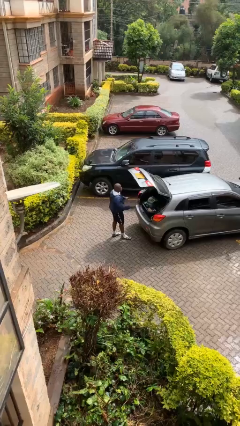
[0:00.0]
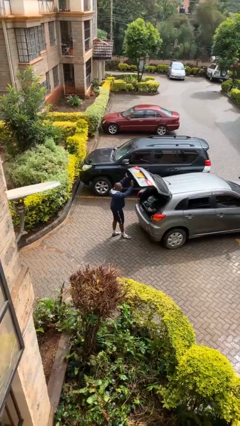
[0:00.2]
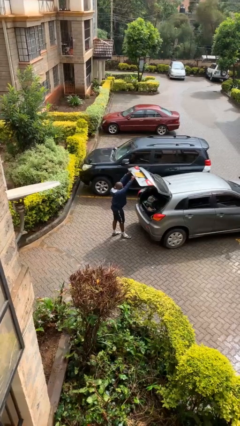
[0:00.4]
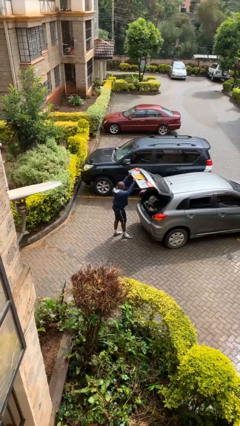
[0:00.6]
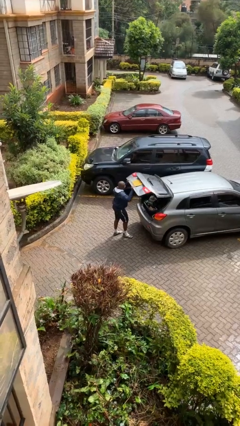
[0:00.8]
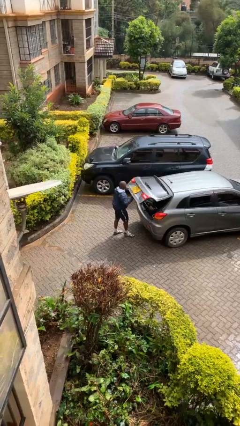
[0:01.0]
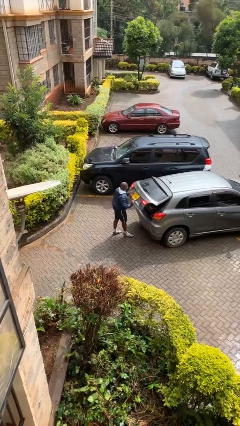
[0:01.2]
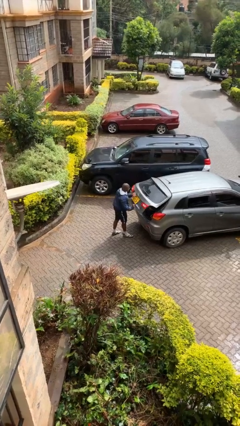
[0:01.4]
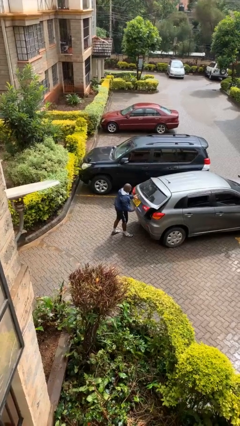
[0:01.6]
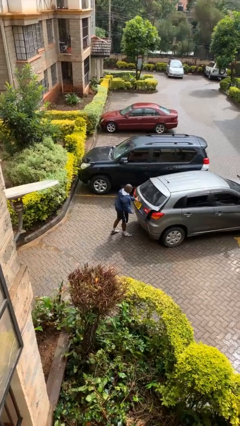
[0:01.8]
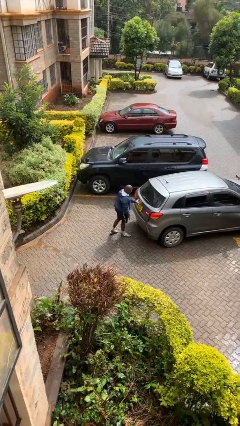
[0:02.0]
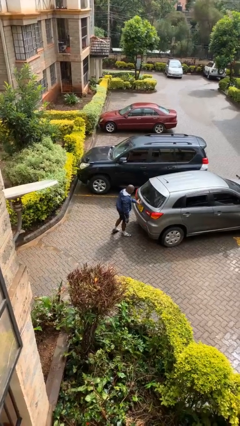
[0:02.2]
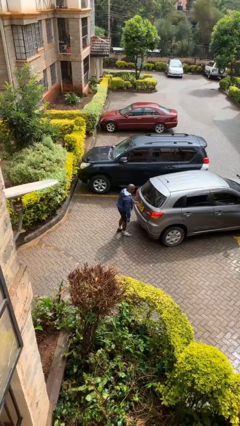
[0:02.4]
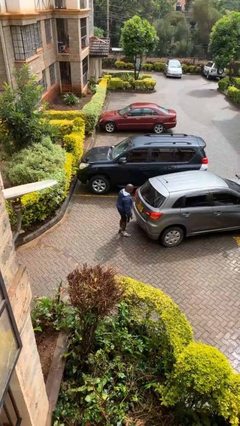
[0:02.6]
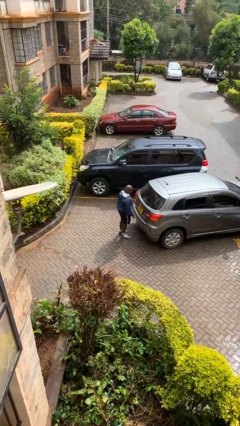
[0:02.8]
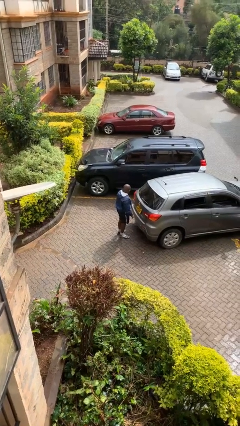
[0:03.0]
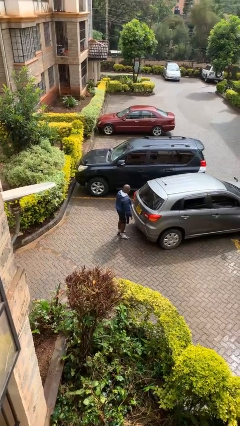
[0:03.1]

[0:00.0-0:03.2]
person closes car trunk

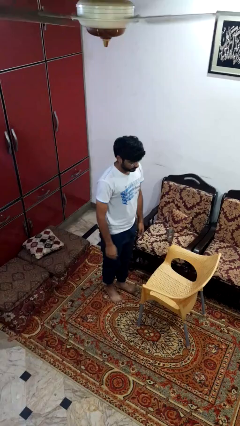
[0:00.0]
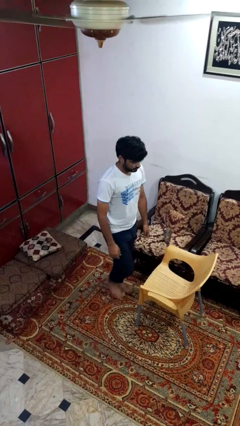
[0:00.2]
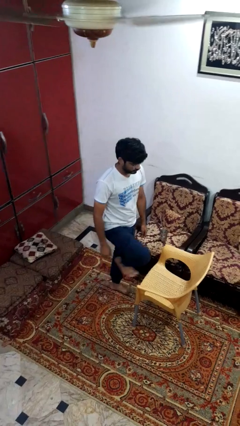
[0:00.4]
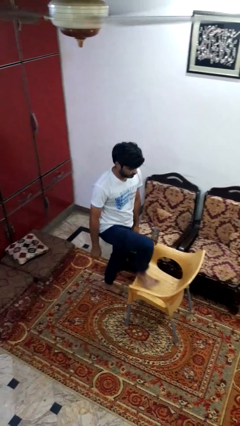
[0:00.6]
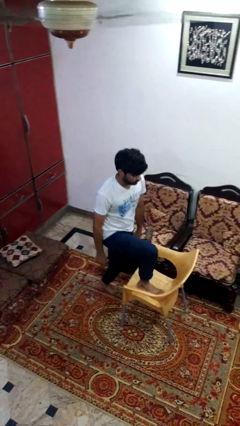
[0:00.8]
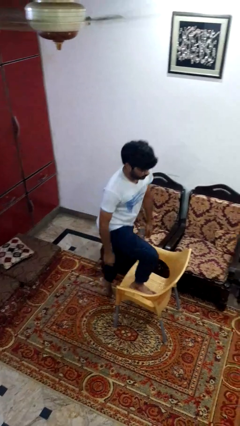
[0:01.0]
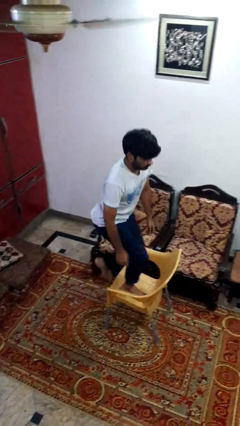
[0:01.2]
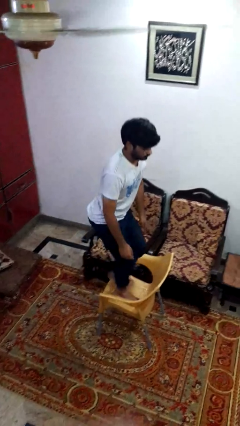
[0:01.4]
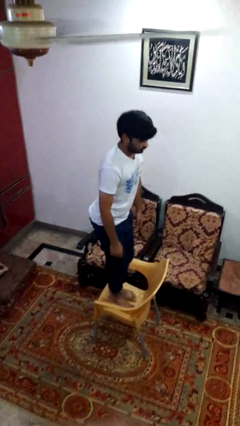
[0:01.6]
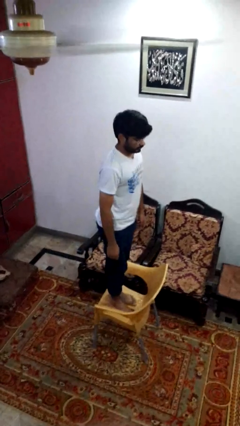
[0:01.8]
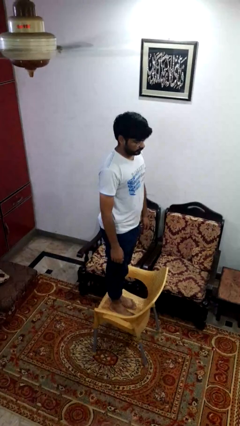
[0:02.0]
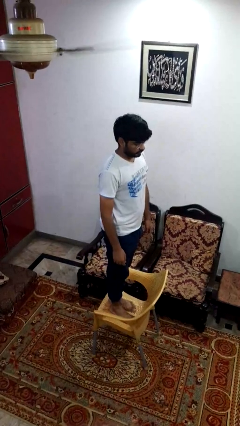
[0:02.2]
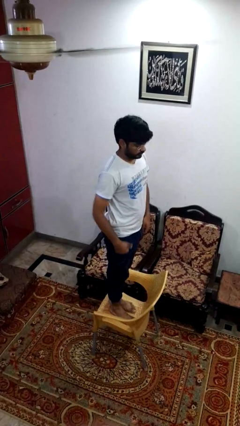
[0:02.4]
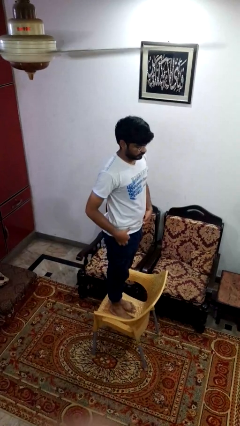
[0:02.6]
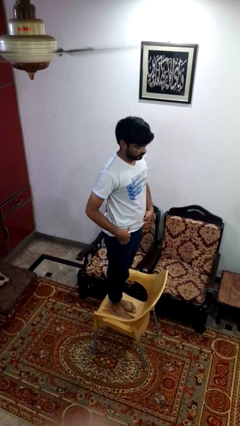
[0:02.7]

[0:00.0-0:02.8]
person climbs on chair

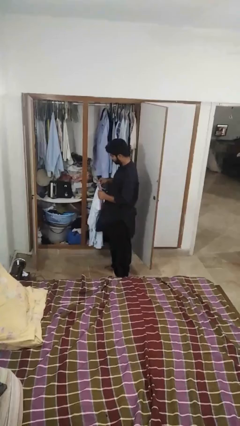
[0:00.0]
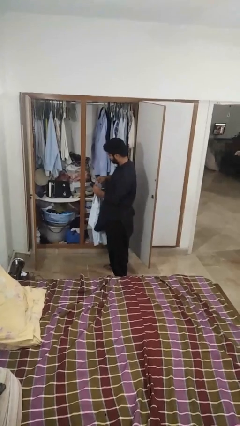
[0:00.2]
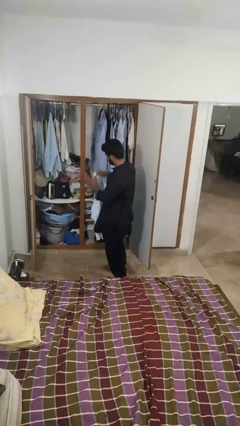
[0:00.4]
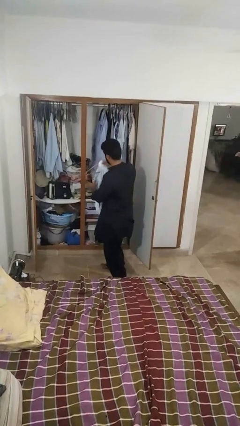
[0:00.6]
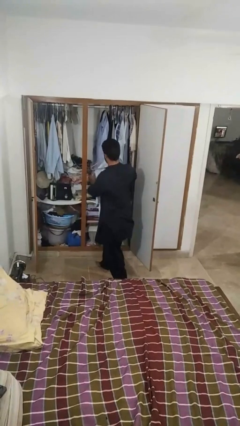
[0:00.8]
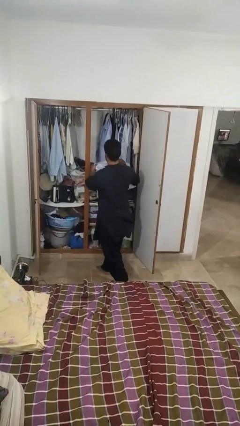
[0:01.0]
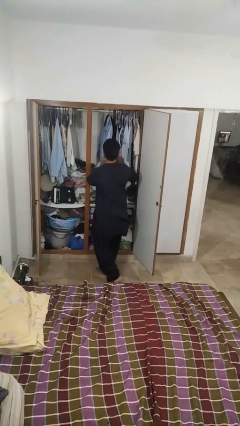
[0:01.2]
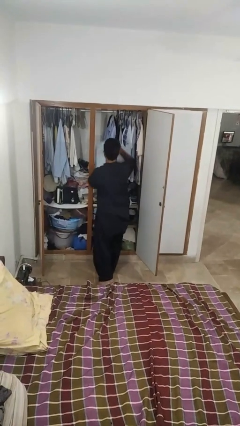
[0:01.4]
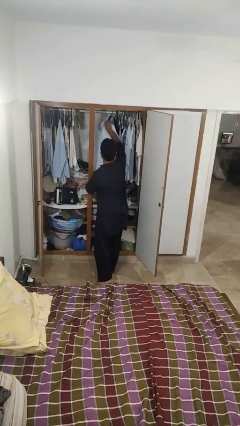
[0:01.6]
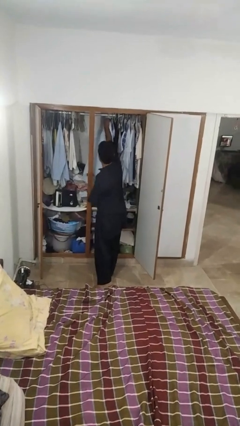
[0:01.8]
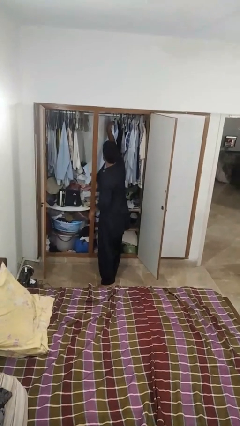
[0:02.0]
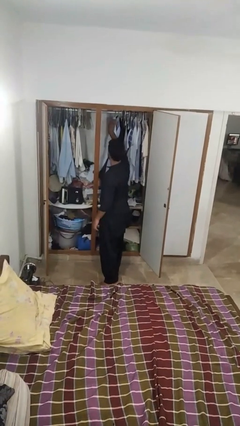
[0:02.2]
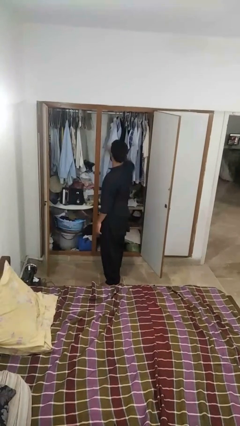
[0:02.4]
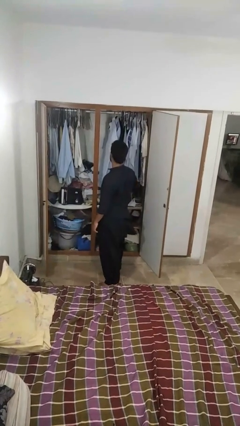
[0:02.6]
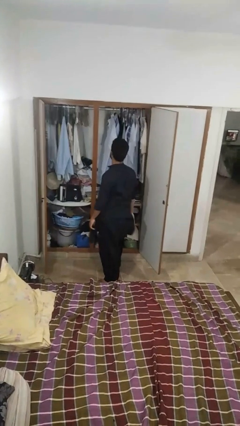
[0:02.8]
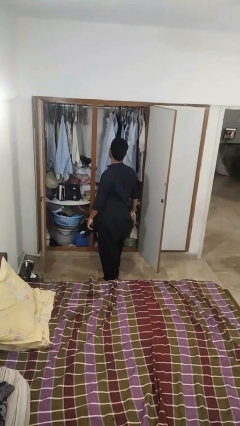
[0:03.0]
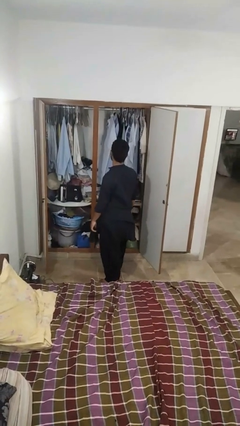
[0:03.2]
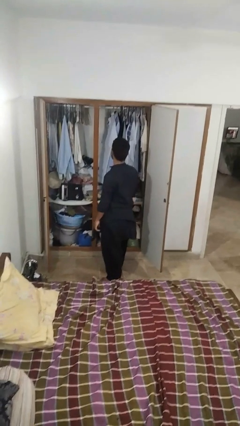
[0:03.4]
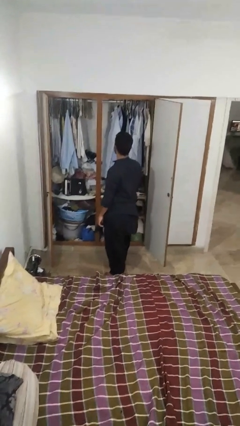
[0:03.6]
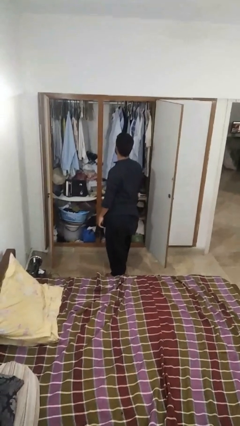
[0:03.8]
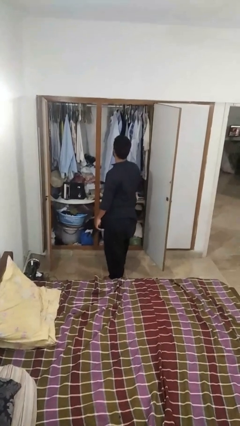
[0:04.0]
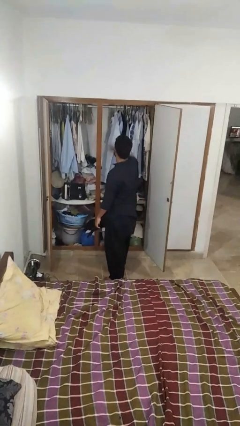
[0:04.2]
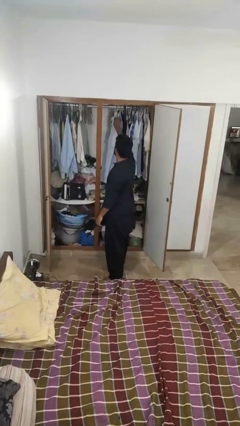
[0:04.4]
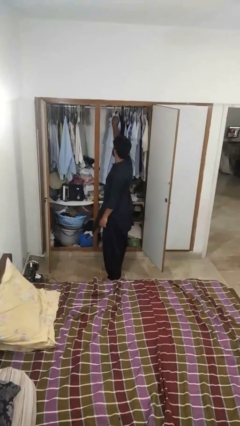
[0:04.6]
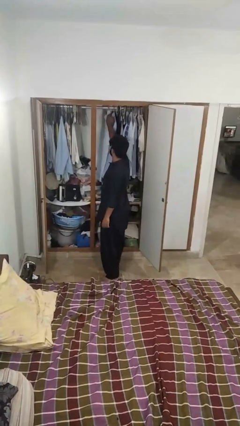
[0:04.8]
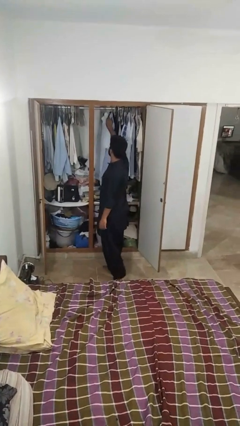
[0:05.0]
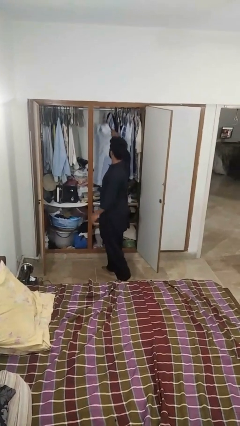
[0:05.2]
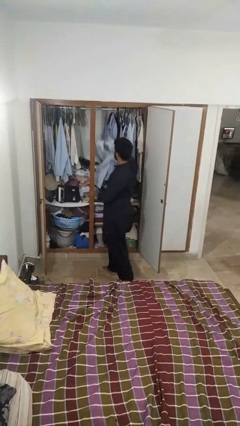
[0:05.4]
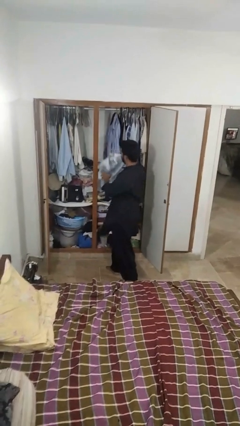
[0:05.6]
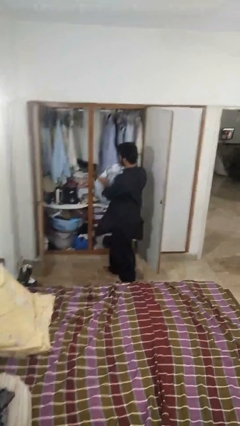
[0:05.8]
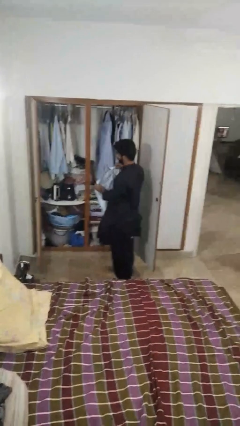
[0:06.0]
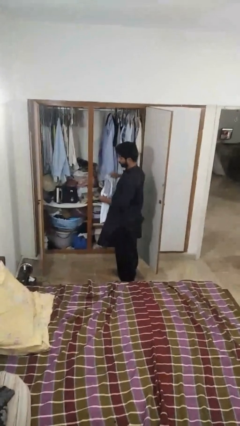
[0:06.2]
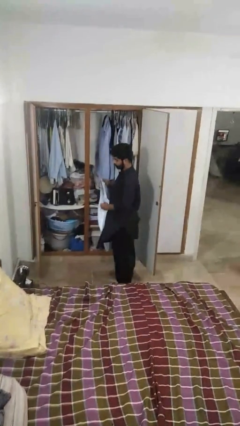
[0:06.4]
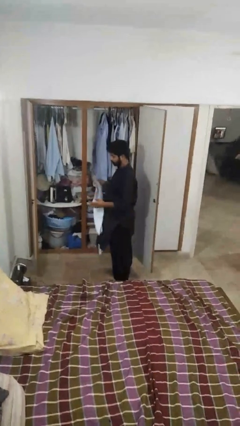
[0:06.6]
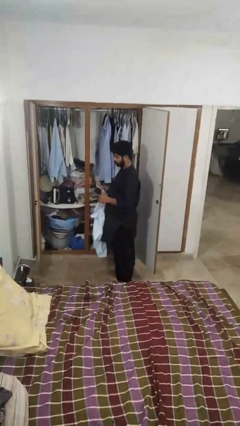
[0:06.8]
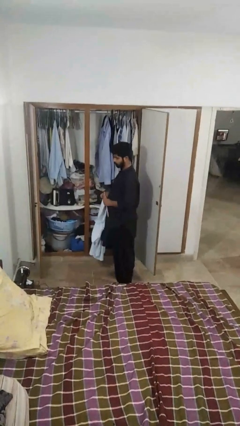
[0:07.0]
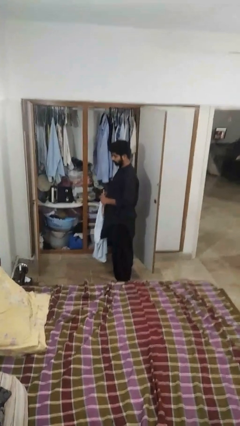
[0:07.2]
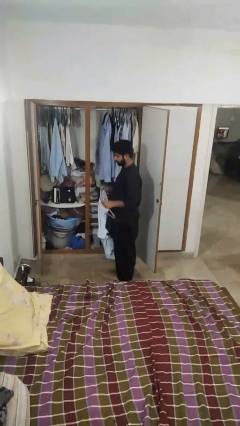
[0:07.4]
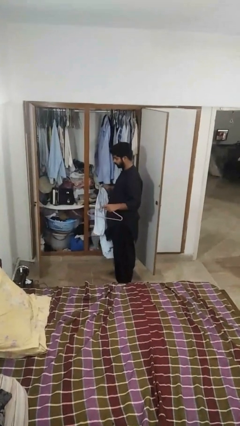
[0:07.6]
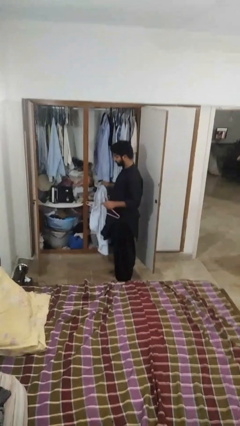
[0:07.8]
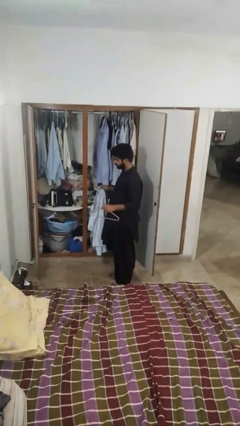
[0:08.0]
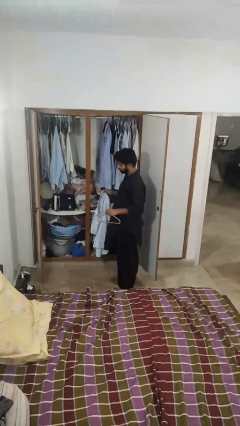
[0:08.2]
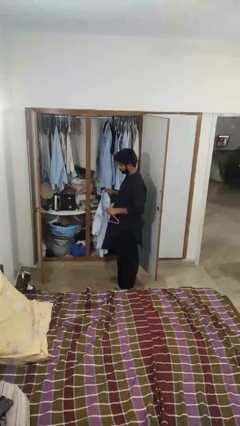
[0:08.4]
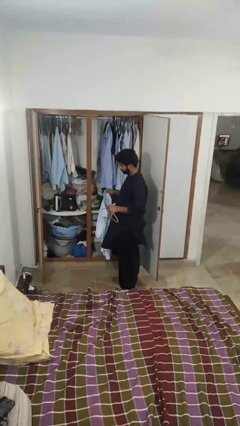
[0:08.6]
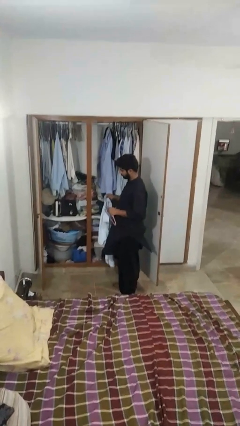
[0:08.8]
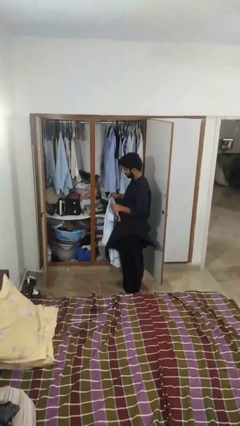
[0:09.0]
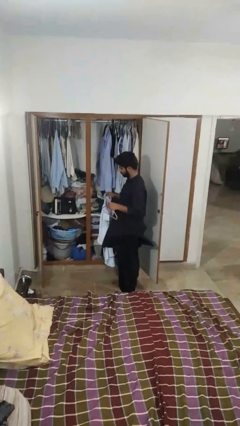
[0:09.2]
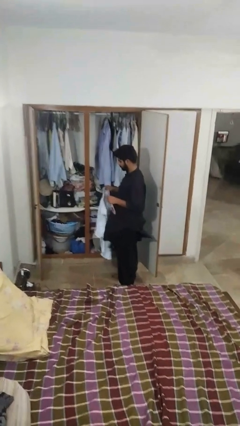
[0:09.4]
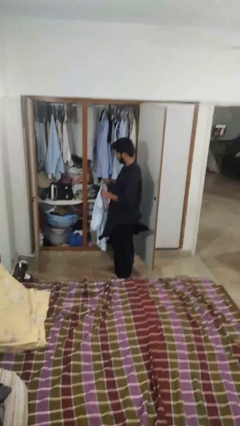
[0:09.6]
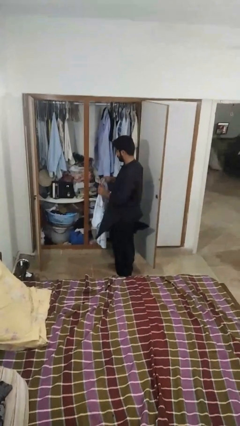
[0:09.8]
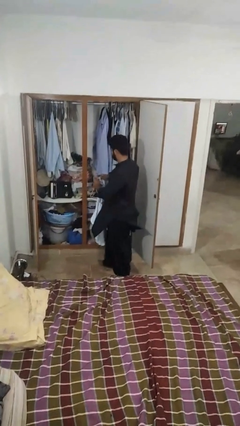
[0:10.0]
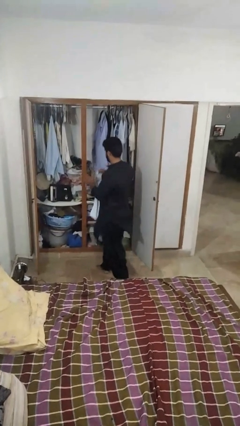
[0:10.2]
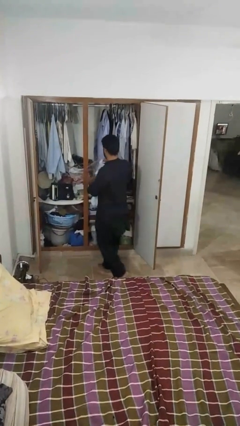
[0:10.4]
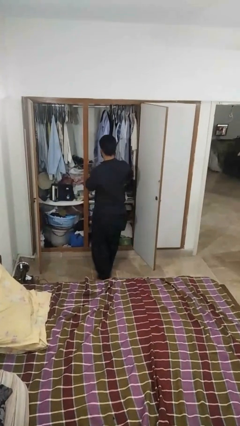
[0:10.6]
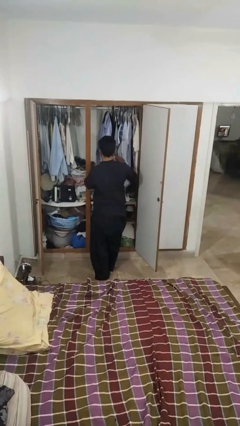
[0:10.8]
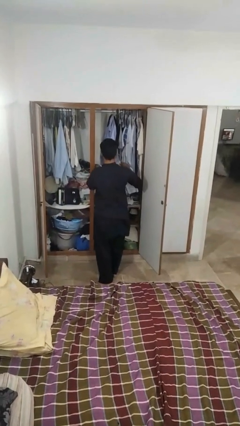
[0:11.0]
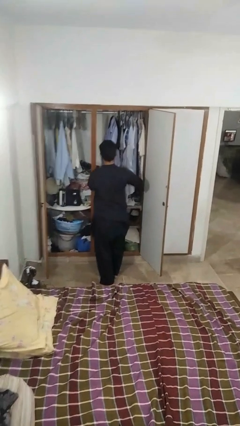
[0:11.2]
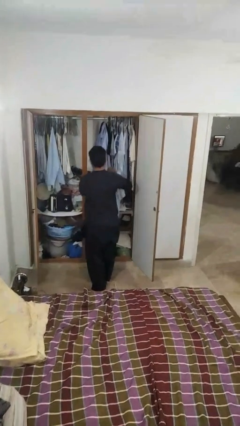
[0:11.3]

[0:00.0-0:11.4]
person puts clothes into dresser

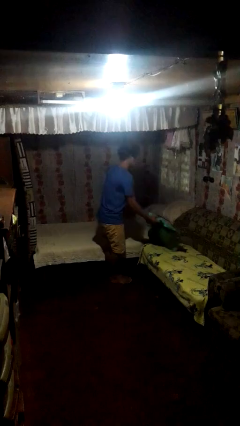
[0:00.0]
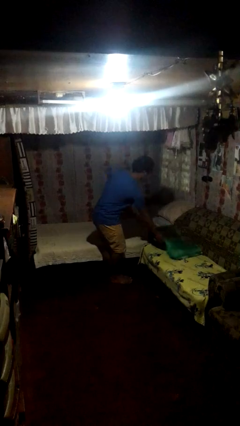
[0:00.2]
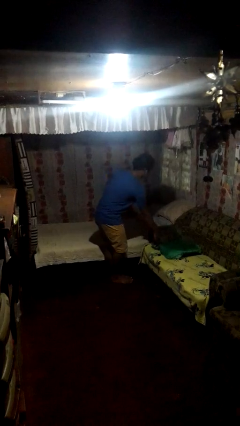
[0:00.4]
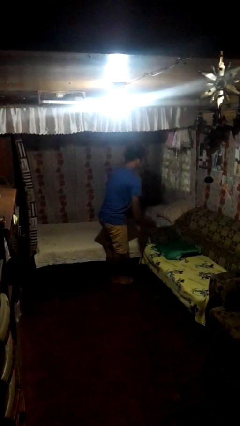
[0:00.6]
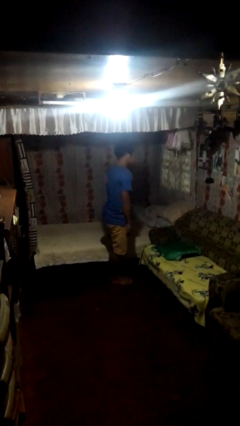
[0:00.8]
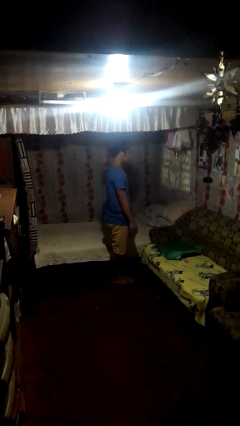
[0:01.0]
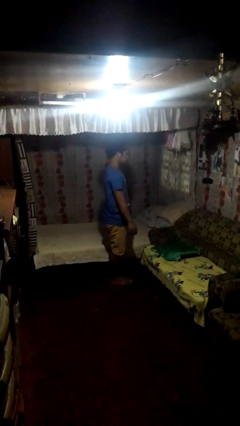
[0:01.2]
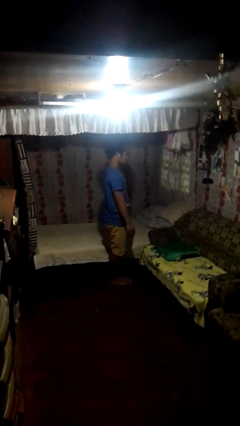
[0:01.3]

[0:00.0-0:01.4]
person puts down object on couch
